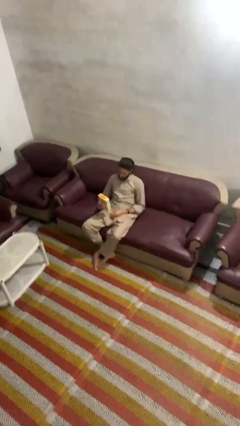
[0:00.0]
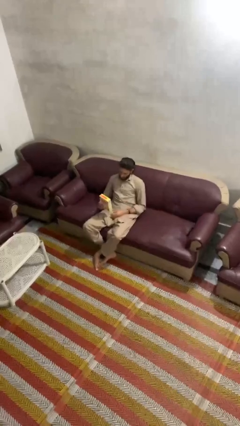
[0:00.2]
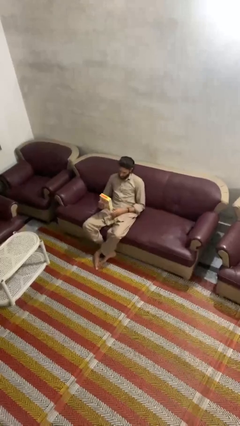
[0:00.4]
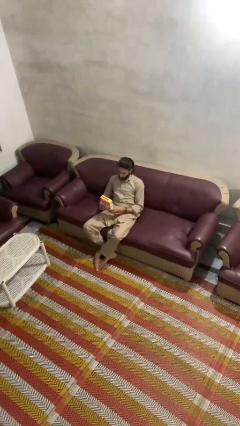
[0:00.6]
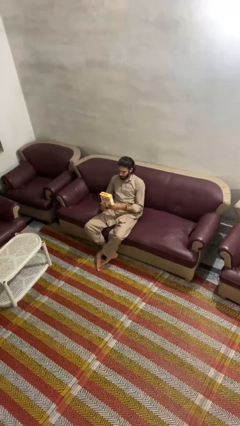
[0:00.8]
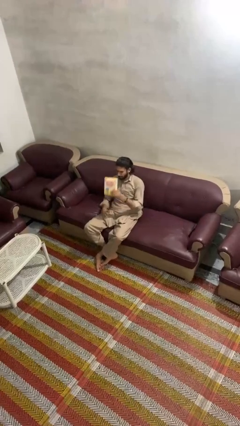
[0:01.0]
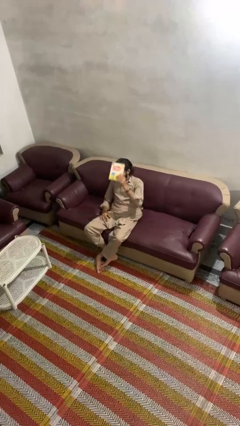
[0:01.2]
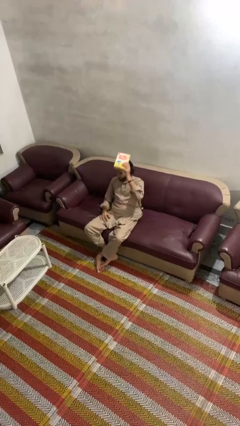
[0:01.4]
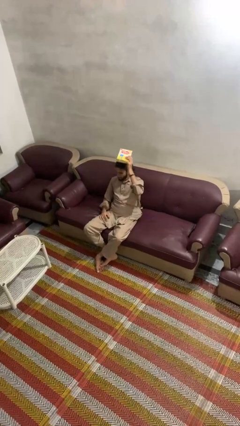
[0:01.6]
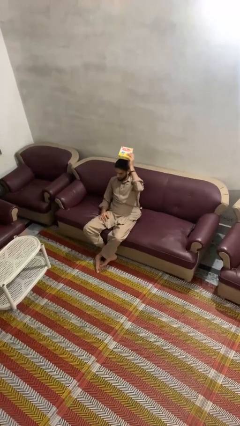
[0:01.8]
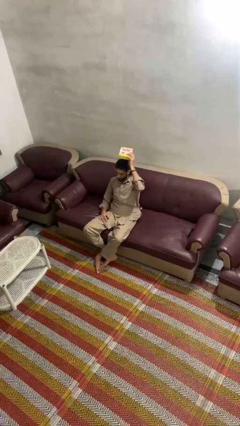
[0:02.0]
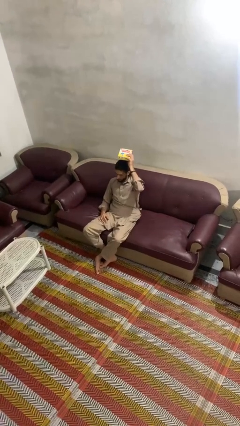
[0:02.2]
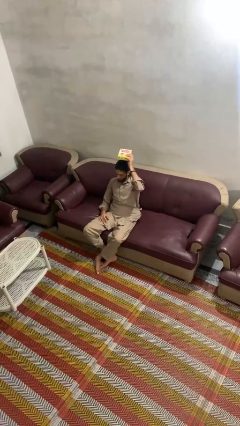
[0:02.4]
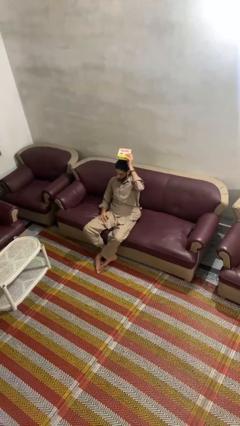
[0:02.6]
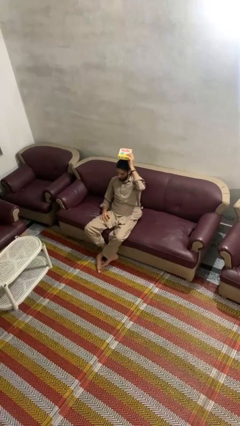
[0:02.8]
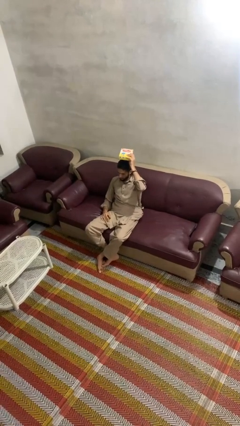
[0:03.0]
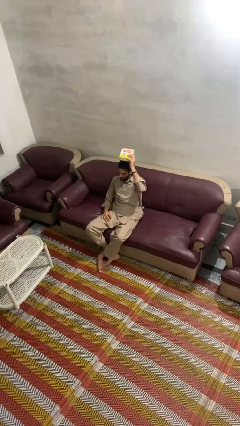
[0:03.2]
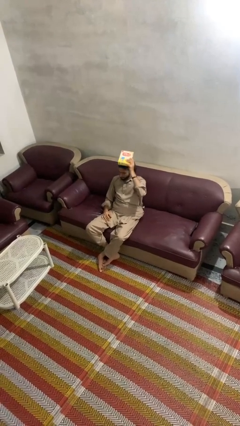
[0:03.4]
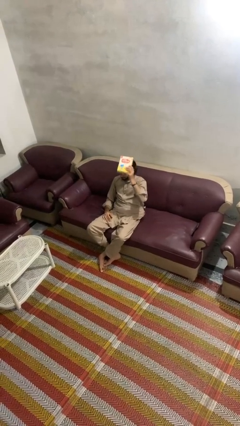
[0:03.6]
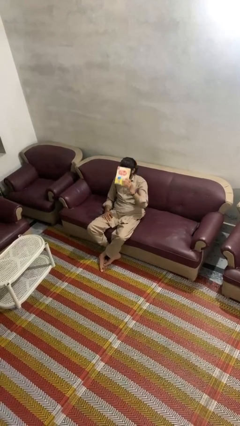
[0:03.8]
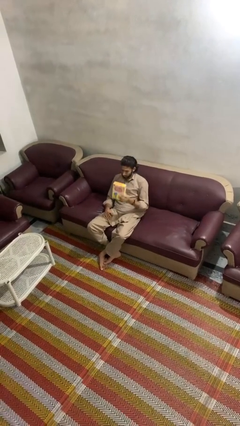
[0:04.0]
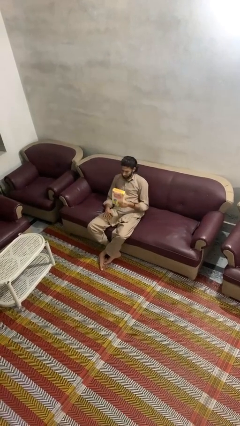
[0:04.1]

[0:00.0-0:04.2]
person holds object above head

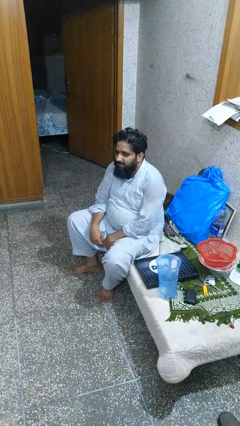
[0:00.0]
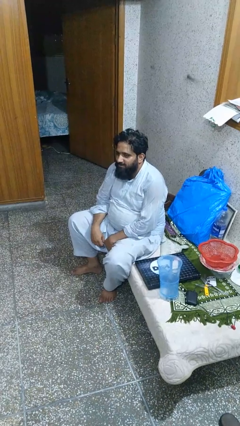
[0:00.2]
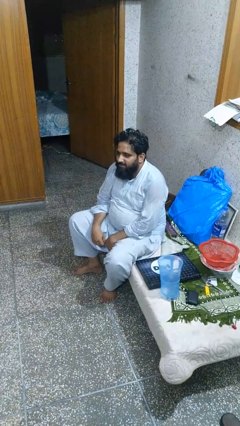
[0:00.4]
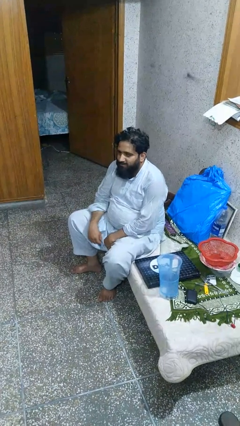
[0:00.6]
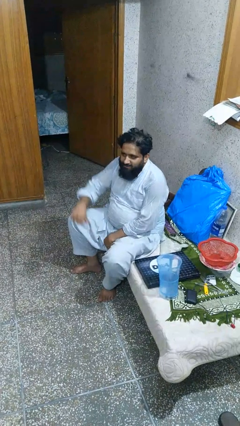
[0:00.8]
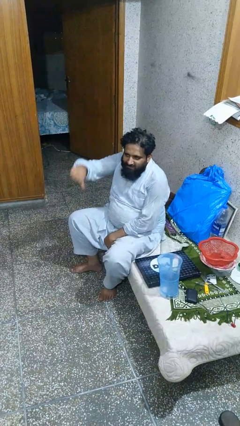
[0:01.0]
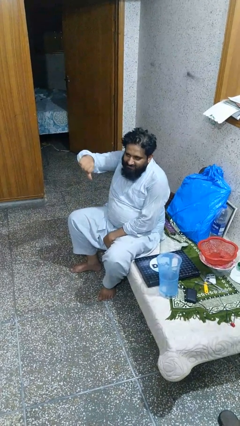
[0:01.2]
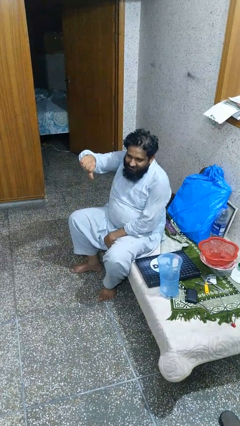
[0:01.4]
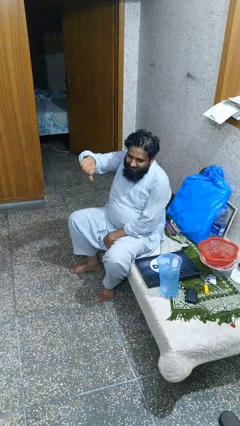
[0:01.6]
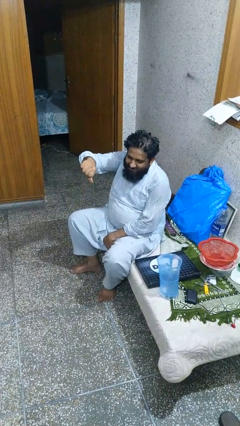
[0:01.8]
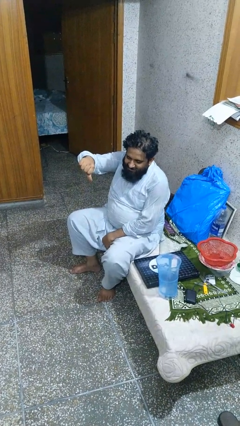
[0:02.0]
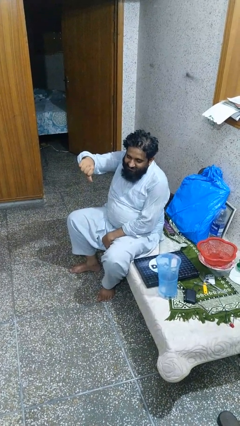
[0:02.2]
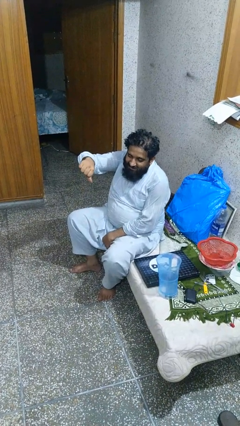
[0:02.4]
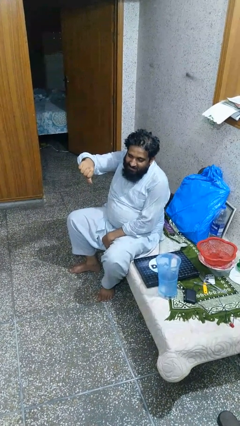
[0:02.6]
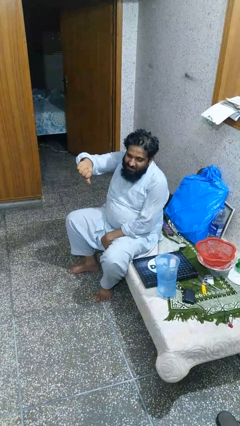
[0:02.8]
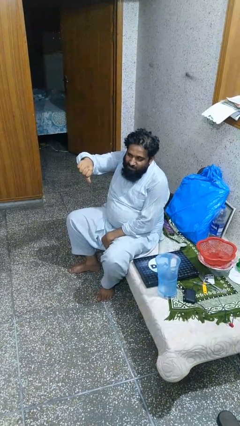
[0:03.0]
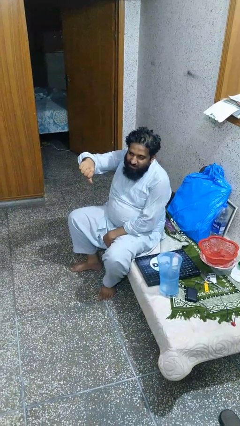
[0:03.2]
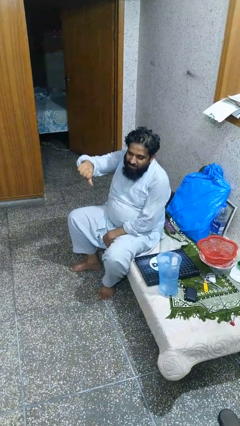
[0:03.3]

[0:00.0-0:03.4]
person gestures thumbs down

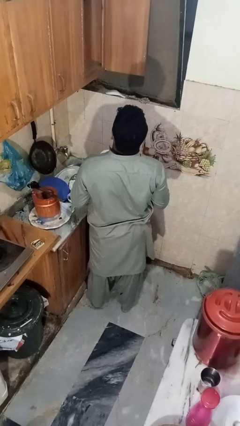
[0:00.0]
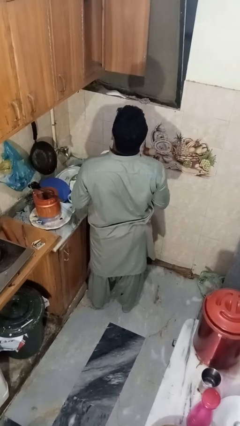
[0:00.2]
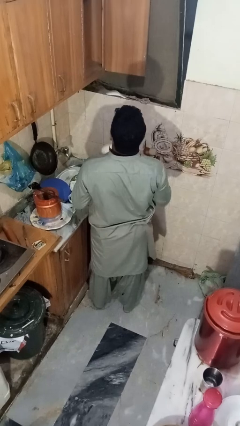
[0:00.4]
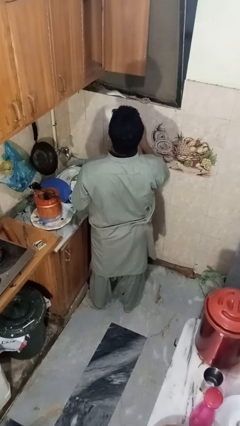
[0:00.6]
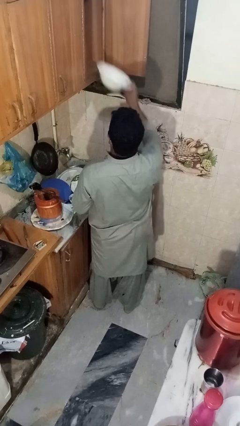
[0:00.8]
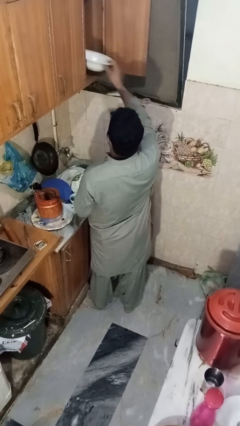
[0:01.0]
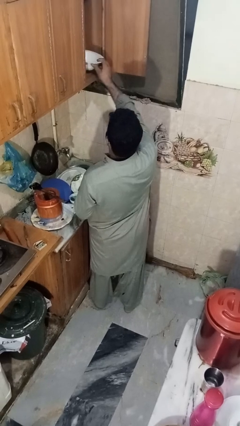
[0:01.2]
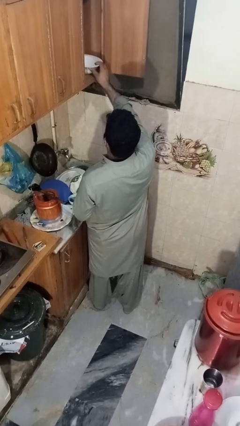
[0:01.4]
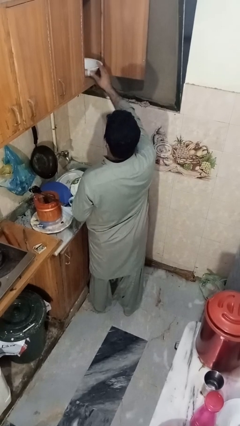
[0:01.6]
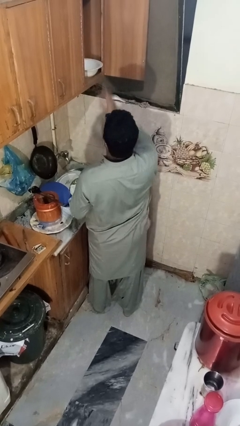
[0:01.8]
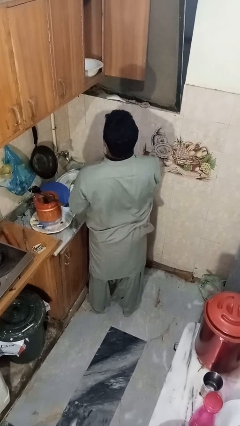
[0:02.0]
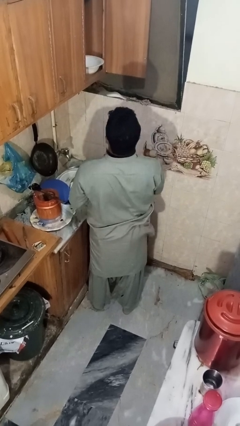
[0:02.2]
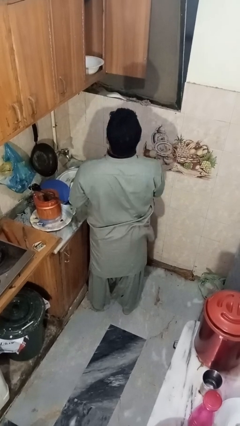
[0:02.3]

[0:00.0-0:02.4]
person puts object in cabinet

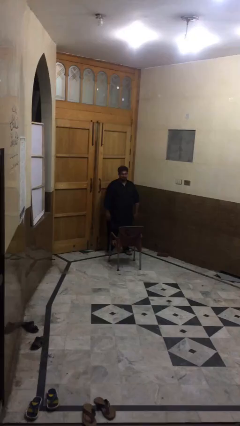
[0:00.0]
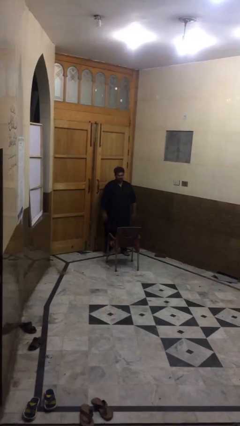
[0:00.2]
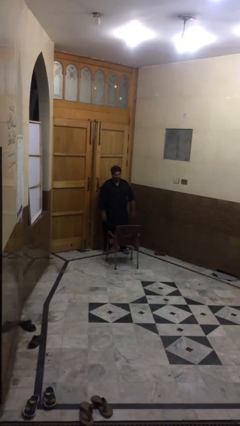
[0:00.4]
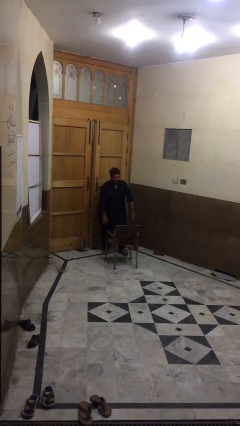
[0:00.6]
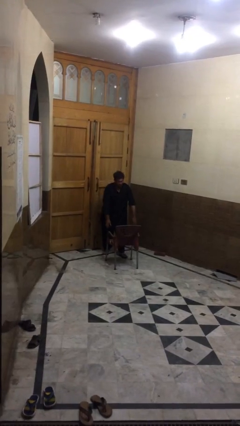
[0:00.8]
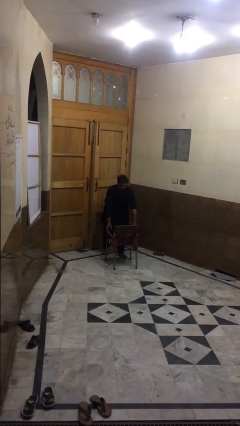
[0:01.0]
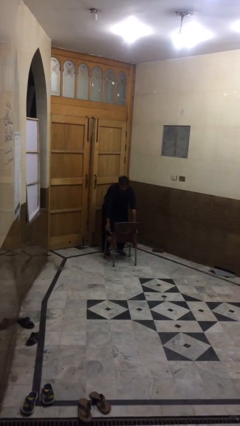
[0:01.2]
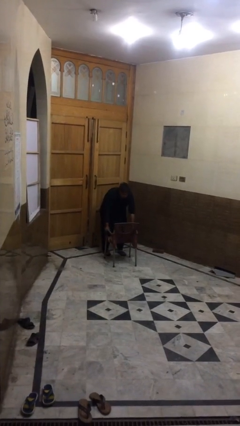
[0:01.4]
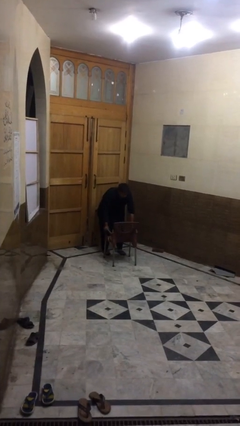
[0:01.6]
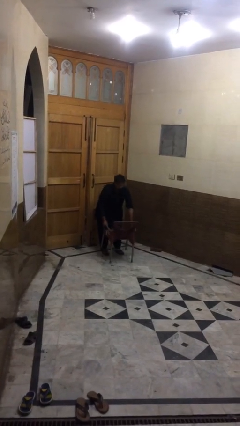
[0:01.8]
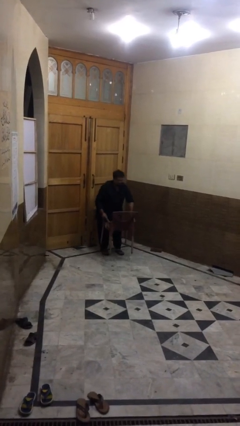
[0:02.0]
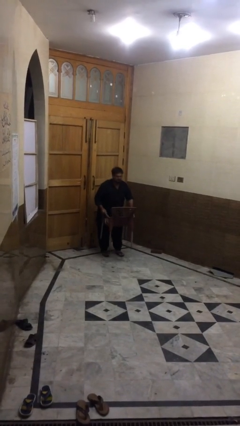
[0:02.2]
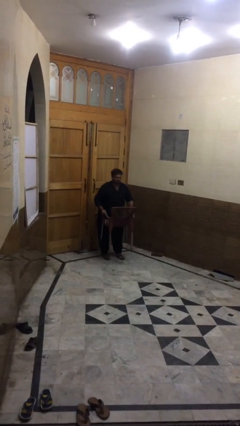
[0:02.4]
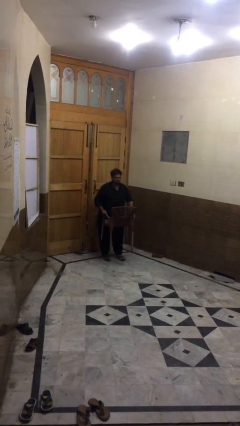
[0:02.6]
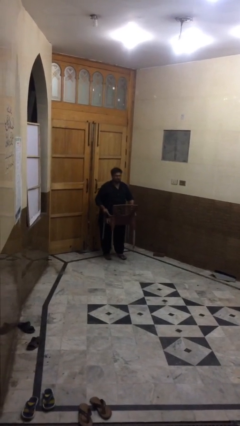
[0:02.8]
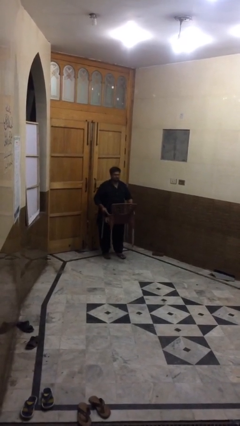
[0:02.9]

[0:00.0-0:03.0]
person picks up object from floor

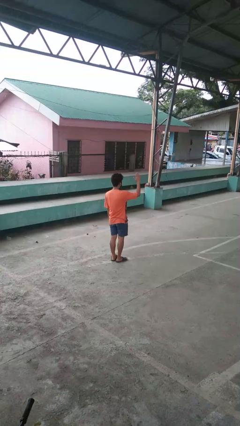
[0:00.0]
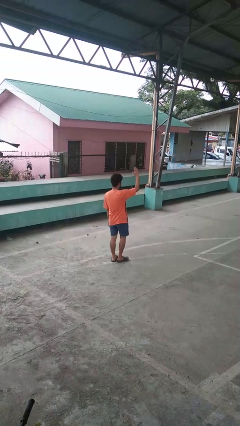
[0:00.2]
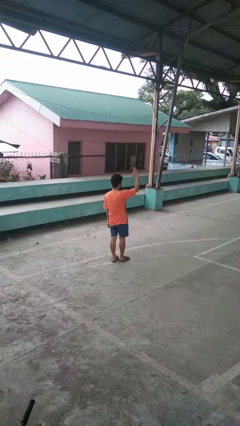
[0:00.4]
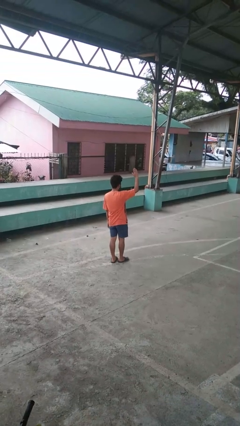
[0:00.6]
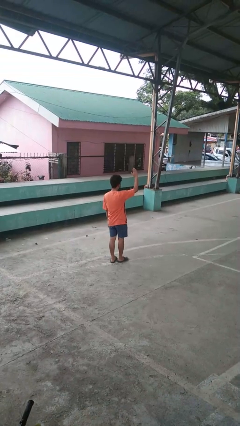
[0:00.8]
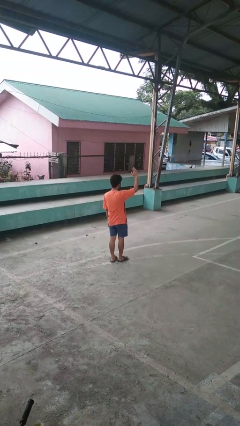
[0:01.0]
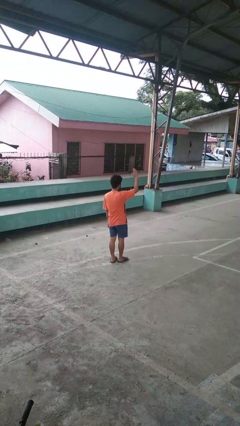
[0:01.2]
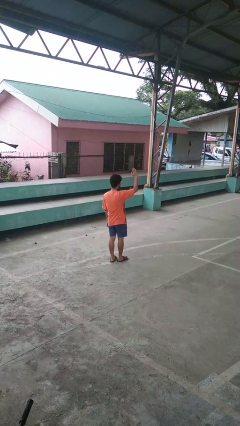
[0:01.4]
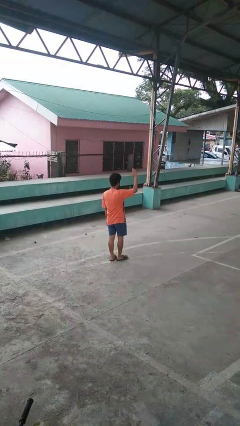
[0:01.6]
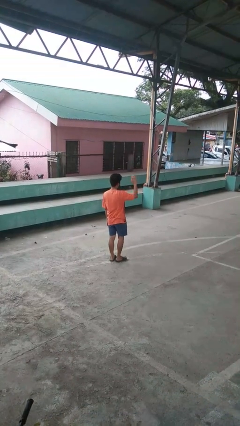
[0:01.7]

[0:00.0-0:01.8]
person gestures raise hand

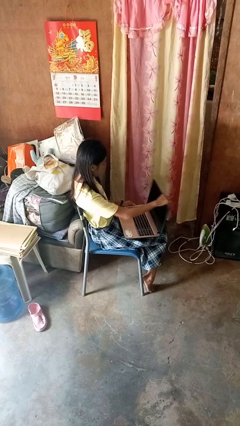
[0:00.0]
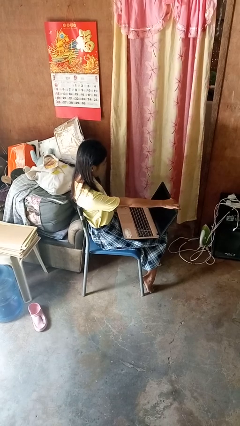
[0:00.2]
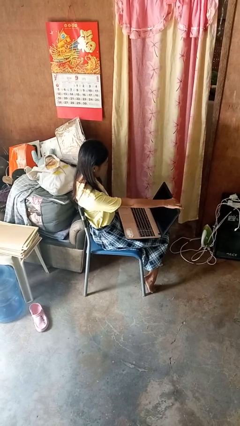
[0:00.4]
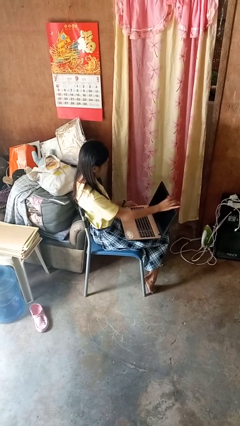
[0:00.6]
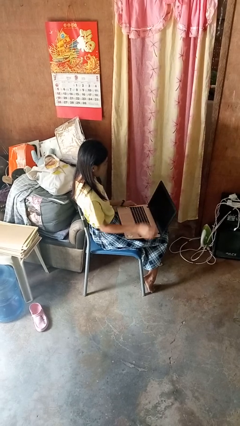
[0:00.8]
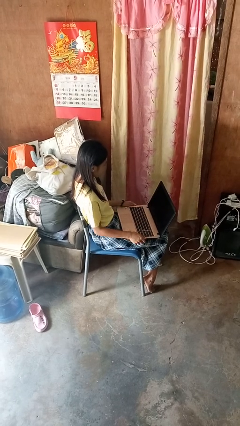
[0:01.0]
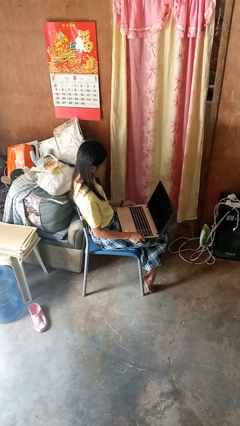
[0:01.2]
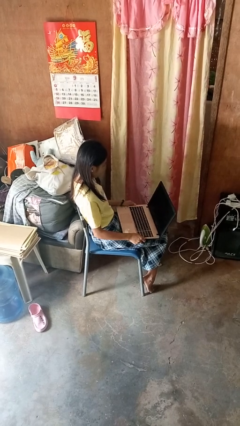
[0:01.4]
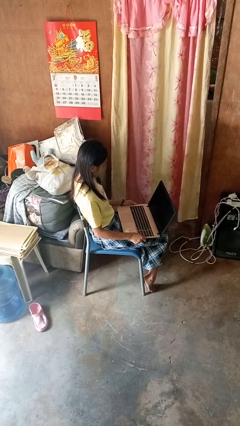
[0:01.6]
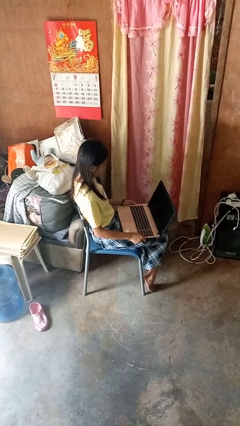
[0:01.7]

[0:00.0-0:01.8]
person opens laptop

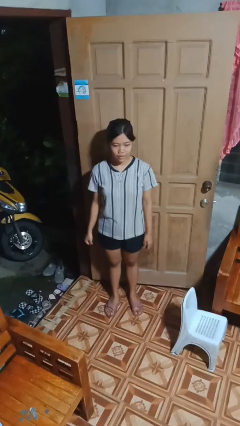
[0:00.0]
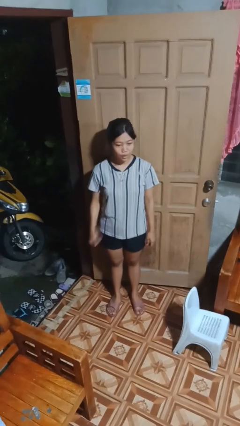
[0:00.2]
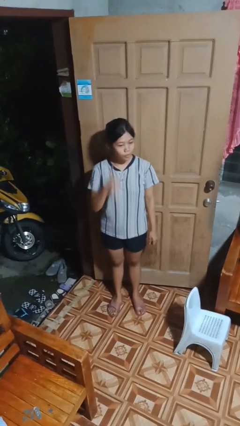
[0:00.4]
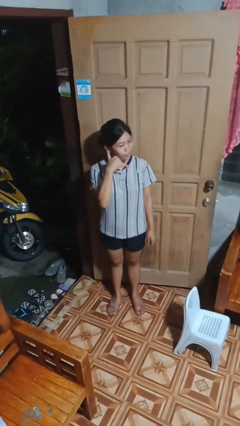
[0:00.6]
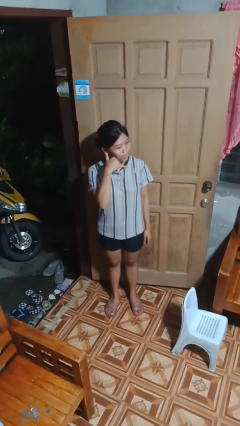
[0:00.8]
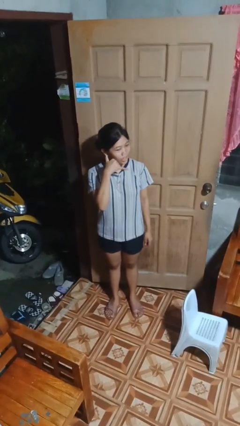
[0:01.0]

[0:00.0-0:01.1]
person gestures call me
